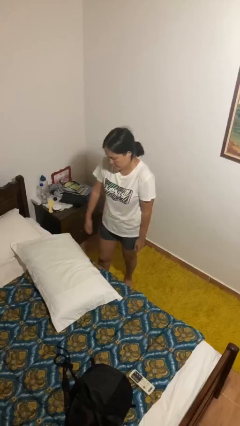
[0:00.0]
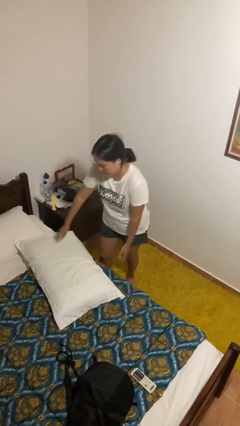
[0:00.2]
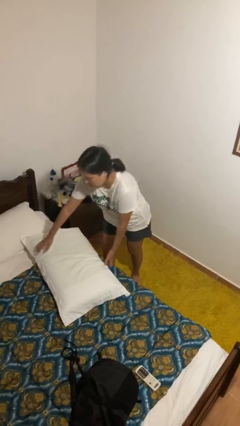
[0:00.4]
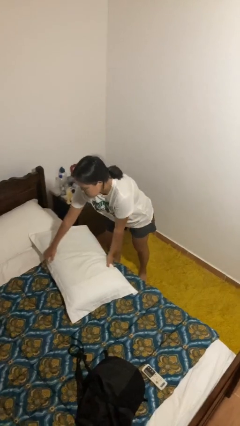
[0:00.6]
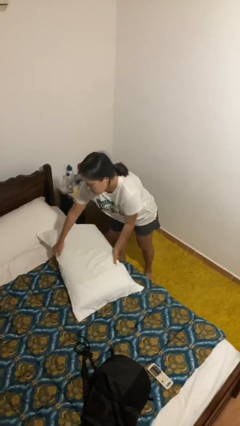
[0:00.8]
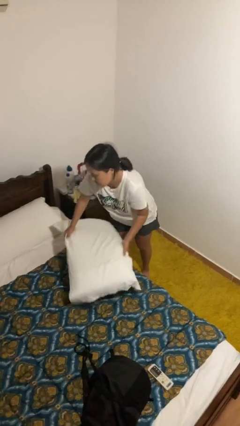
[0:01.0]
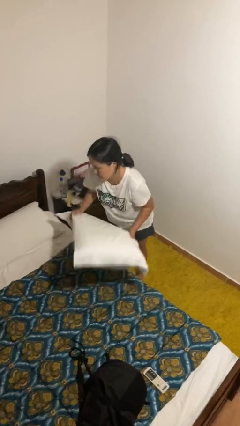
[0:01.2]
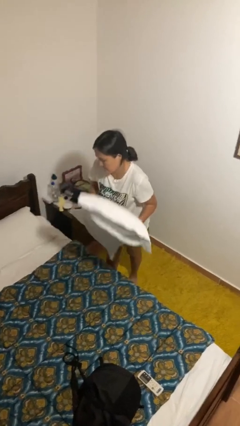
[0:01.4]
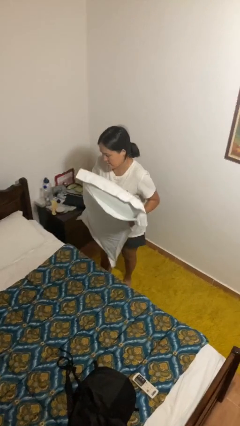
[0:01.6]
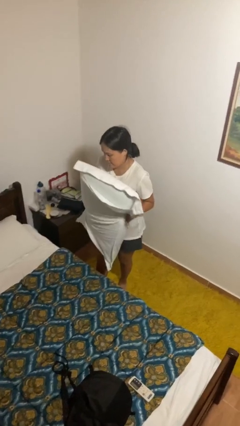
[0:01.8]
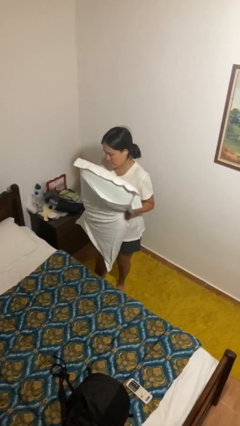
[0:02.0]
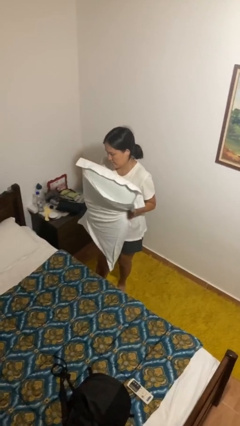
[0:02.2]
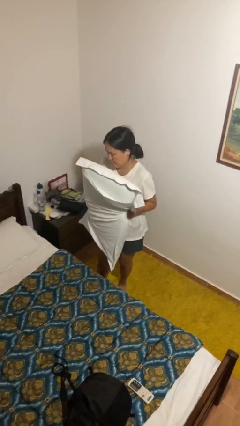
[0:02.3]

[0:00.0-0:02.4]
person picks up object from bed

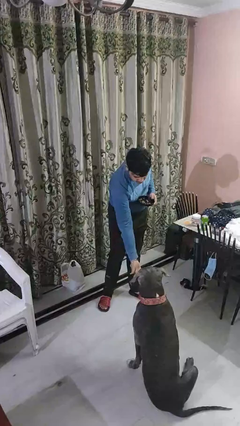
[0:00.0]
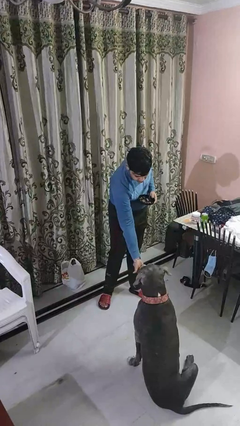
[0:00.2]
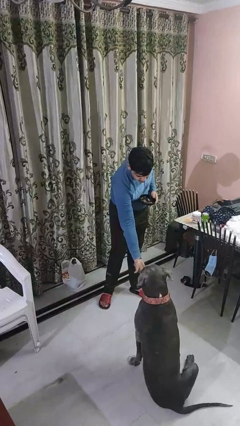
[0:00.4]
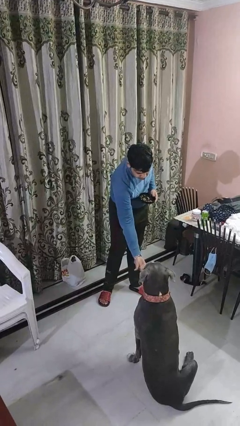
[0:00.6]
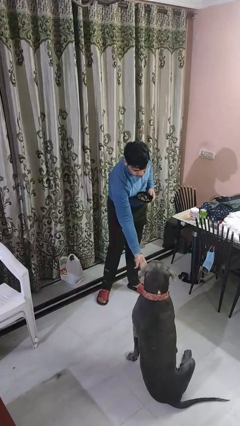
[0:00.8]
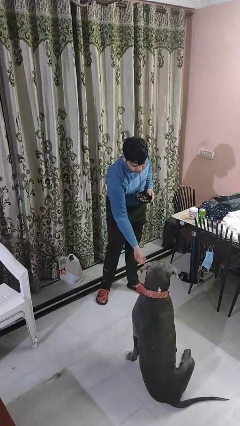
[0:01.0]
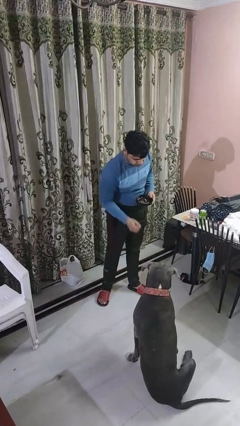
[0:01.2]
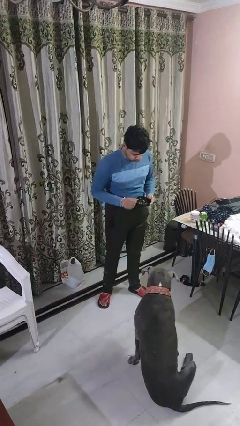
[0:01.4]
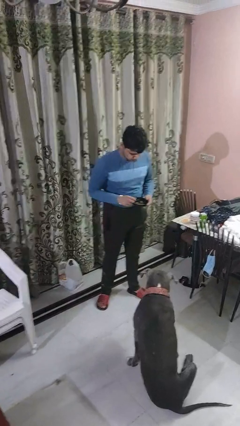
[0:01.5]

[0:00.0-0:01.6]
person feeds dog

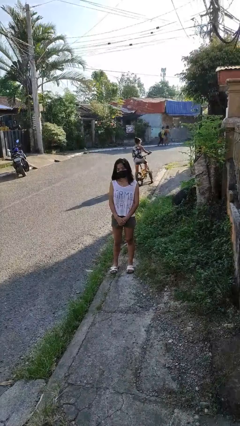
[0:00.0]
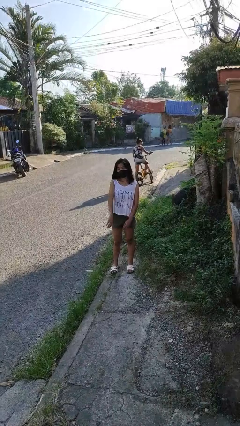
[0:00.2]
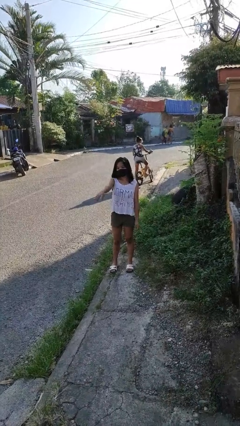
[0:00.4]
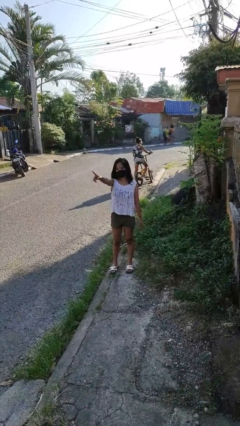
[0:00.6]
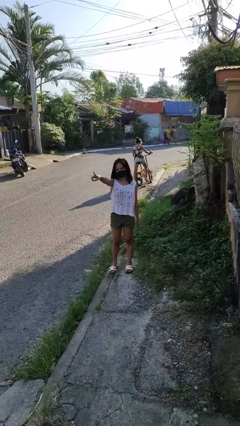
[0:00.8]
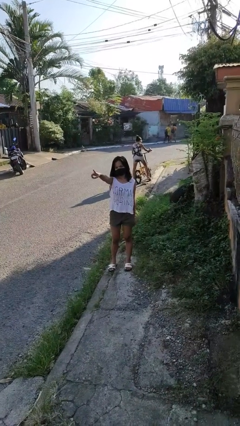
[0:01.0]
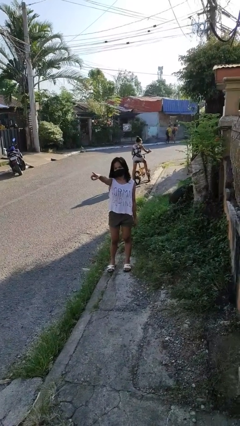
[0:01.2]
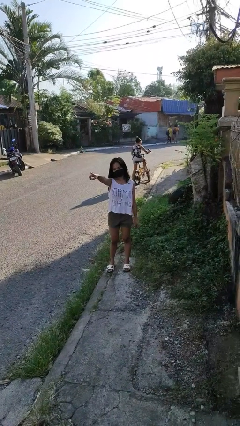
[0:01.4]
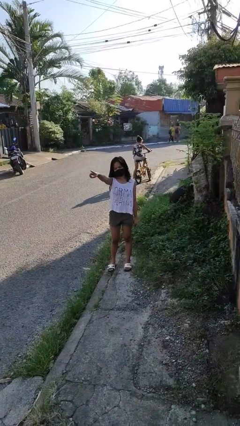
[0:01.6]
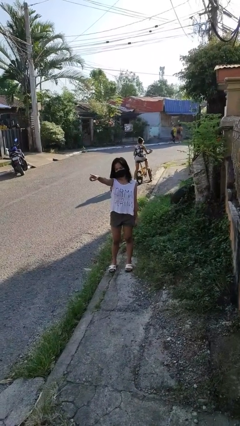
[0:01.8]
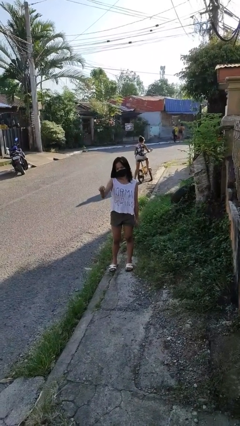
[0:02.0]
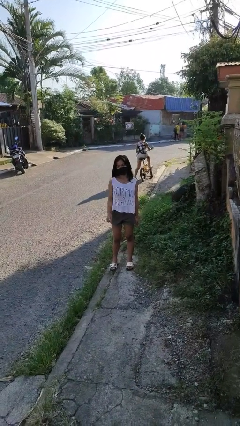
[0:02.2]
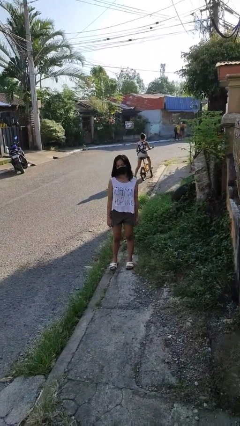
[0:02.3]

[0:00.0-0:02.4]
person points at person

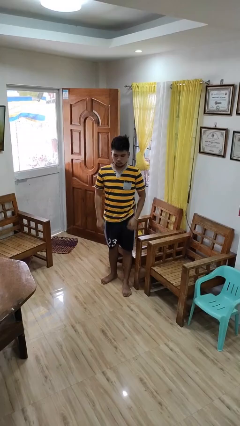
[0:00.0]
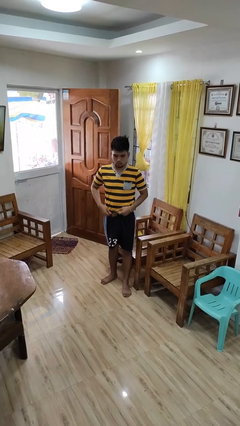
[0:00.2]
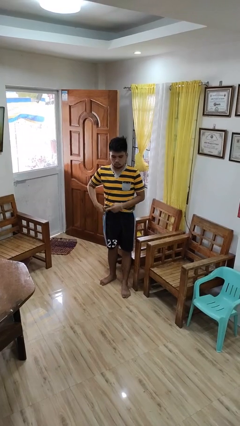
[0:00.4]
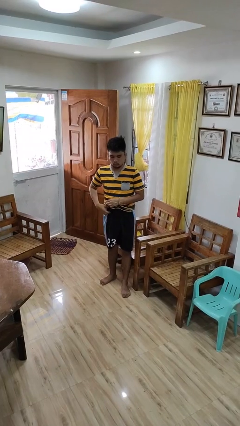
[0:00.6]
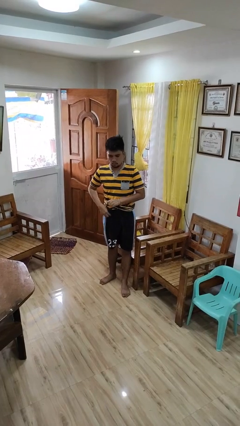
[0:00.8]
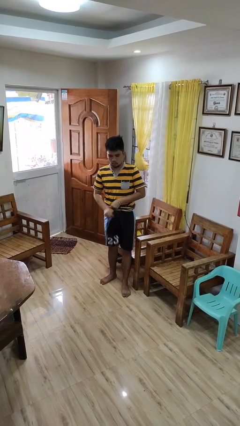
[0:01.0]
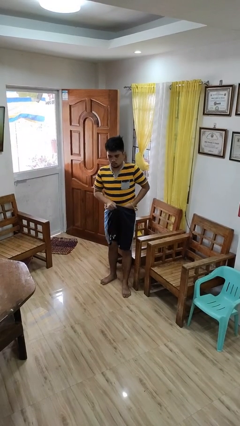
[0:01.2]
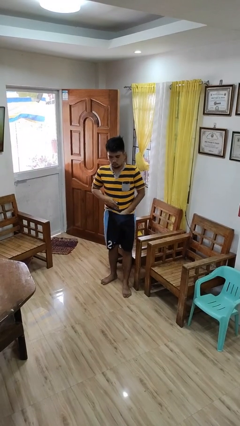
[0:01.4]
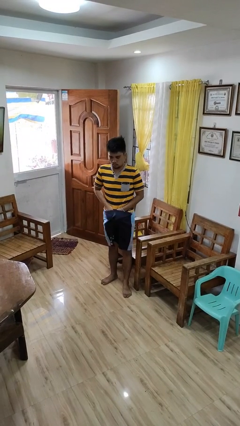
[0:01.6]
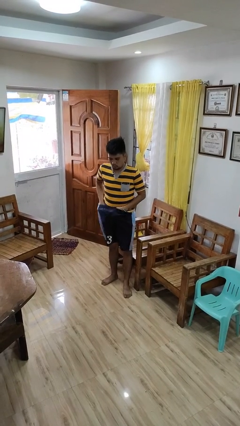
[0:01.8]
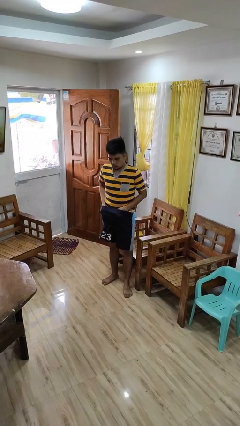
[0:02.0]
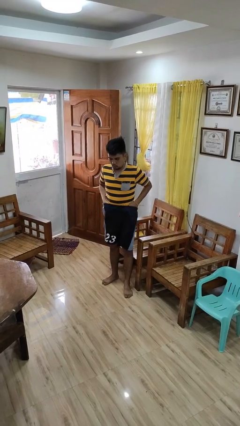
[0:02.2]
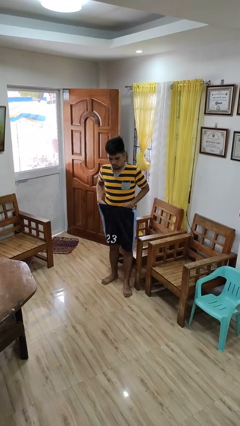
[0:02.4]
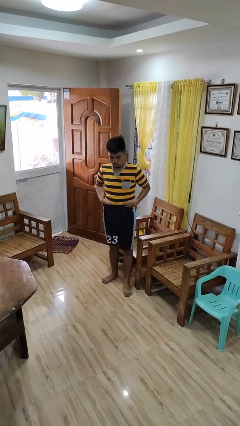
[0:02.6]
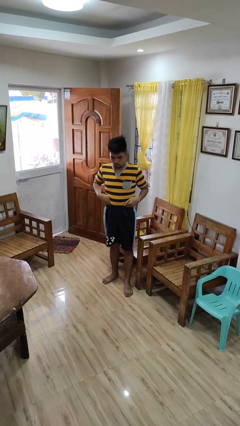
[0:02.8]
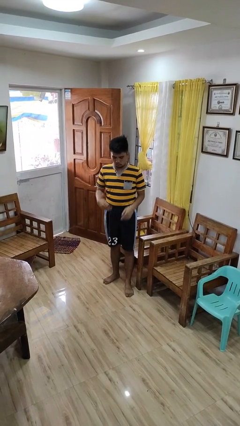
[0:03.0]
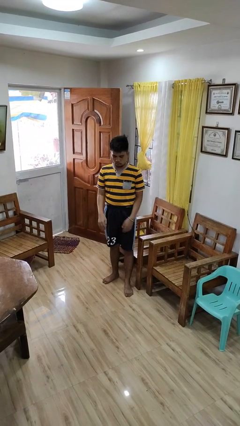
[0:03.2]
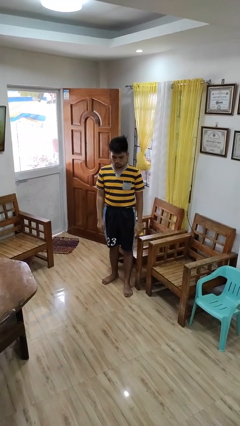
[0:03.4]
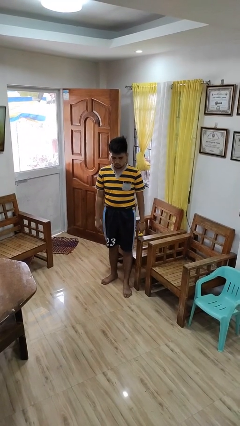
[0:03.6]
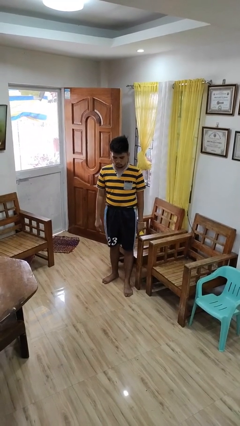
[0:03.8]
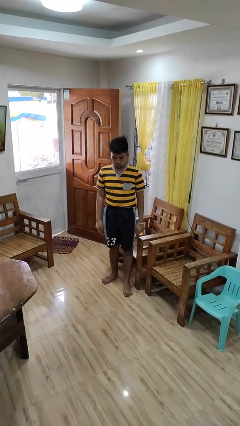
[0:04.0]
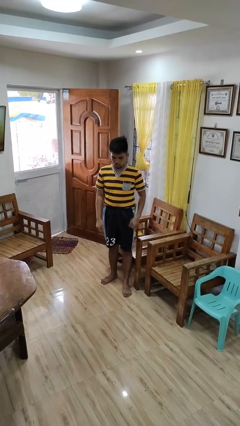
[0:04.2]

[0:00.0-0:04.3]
person tucks in shirt

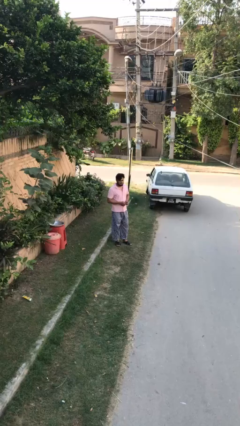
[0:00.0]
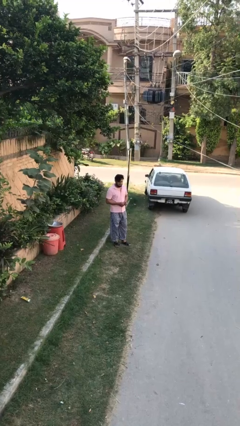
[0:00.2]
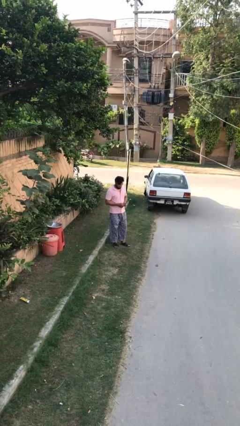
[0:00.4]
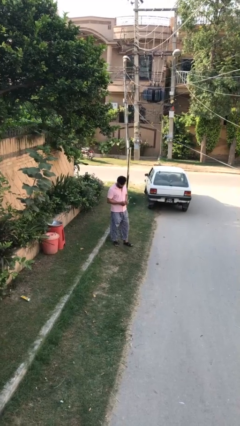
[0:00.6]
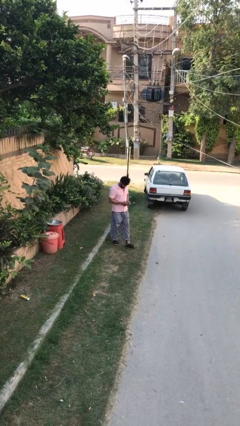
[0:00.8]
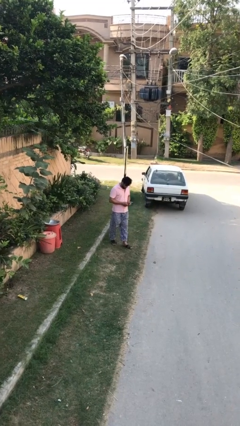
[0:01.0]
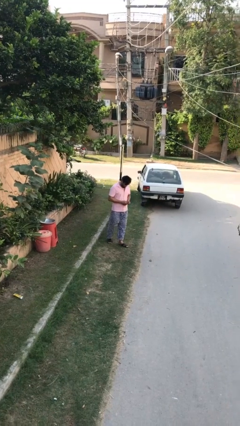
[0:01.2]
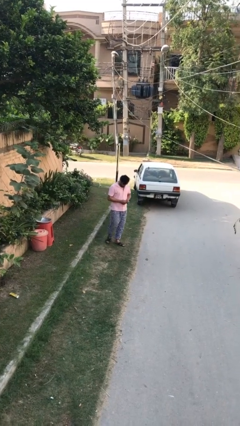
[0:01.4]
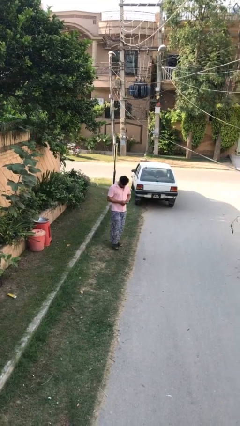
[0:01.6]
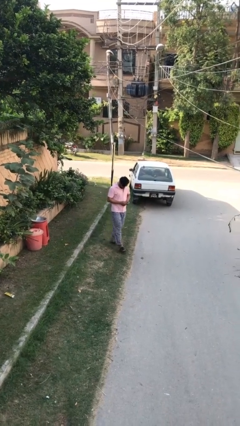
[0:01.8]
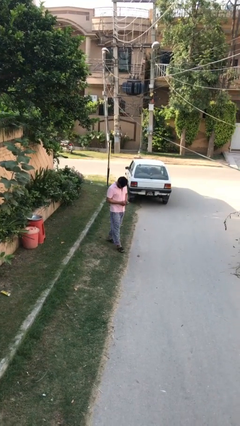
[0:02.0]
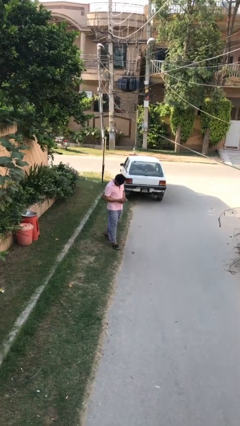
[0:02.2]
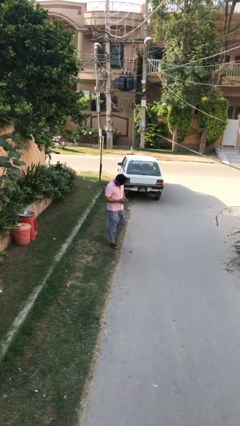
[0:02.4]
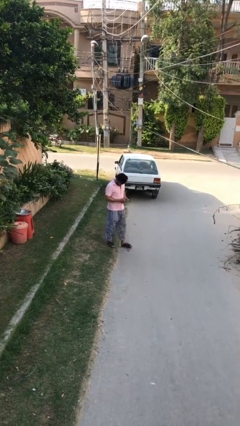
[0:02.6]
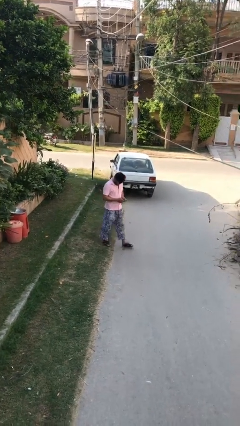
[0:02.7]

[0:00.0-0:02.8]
person texts on phone

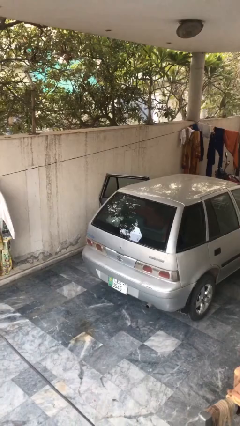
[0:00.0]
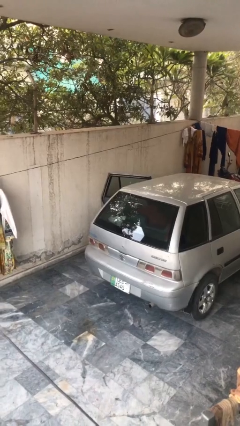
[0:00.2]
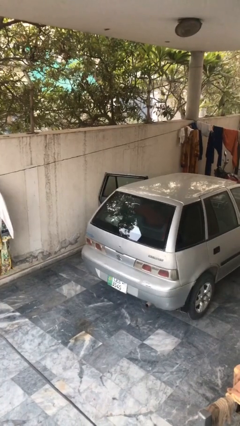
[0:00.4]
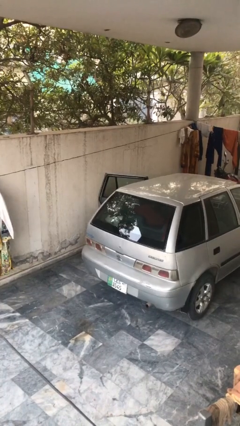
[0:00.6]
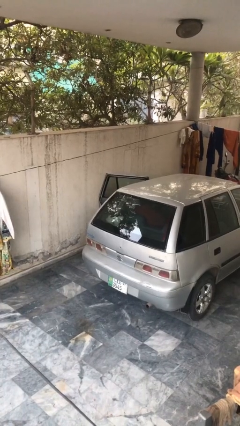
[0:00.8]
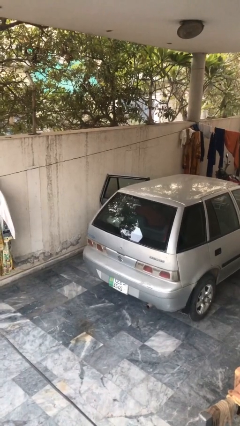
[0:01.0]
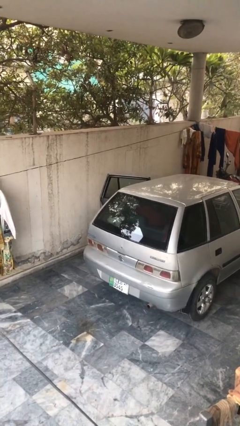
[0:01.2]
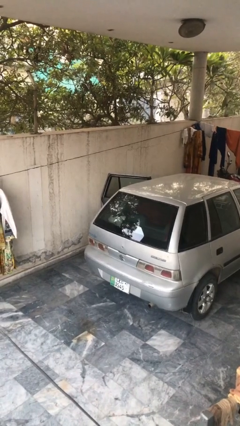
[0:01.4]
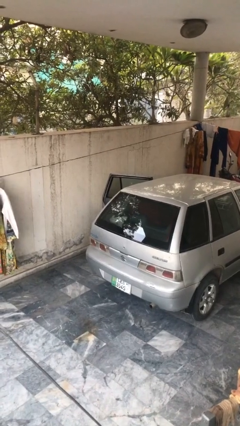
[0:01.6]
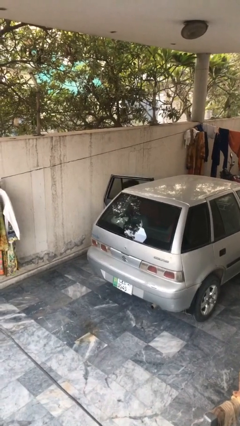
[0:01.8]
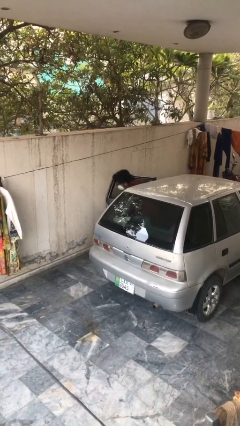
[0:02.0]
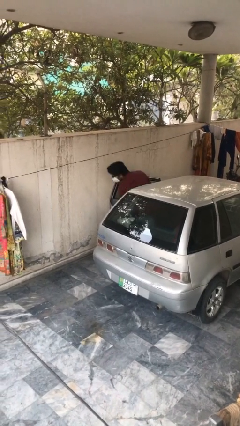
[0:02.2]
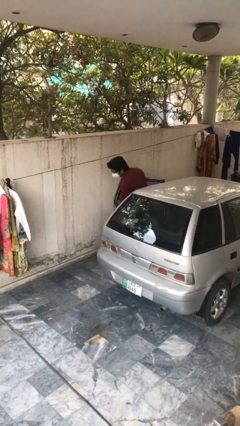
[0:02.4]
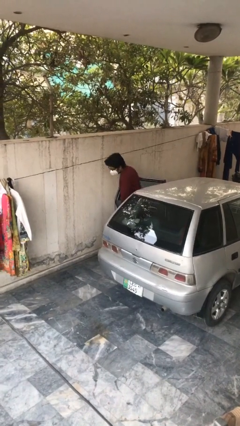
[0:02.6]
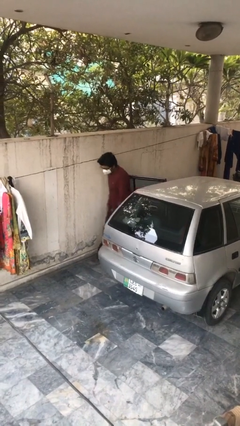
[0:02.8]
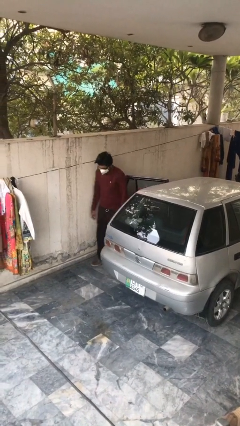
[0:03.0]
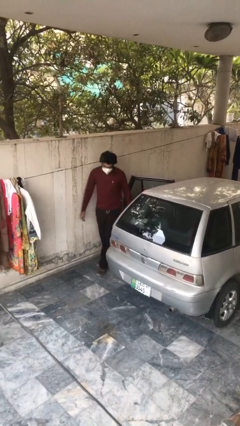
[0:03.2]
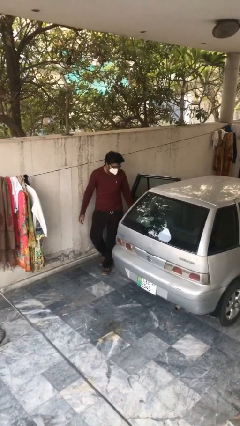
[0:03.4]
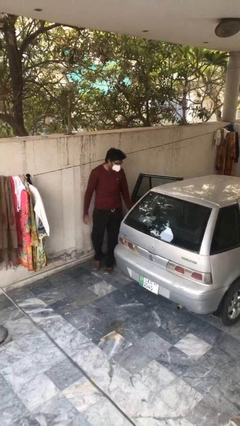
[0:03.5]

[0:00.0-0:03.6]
person exits car

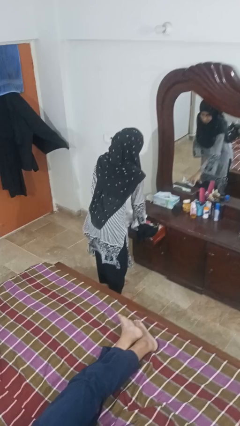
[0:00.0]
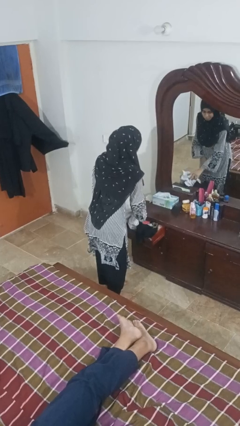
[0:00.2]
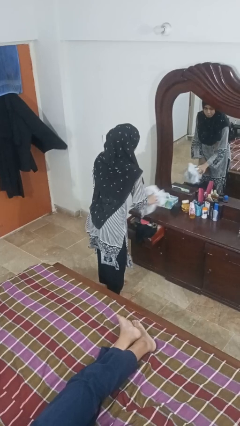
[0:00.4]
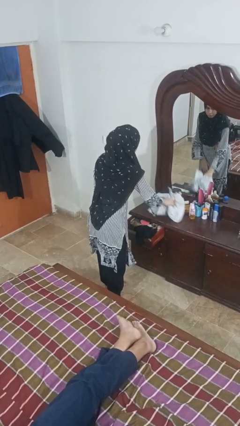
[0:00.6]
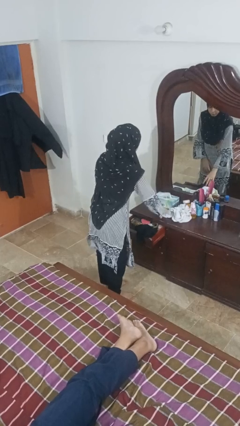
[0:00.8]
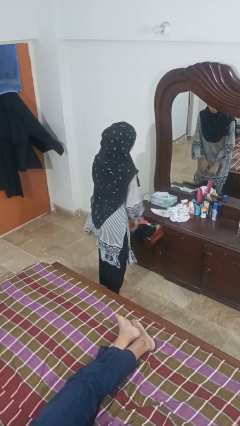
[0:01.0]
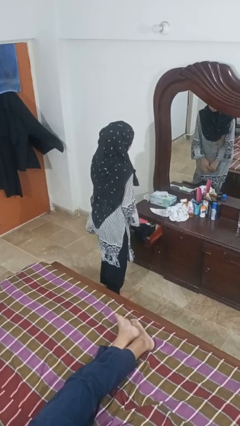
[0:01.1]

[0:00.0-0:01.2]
person takes clothes from dresser
